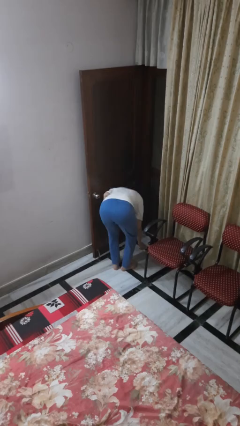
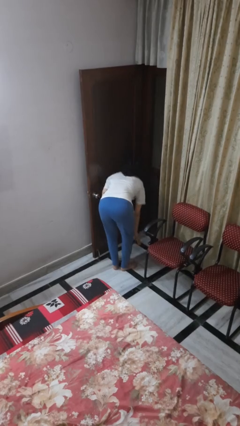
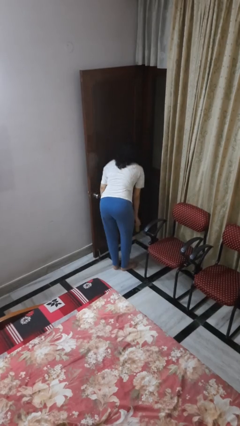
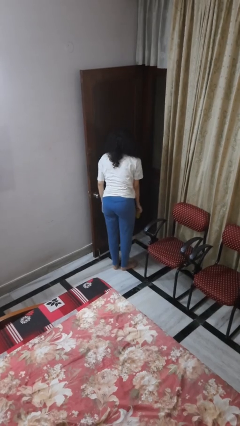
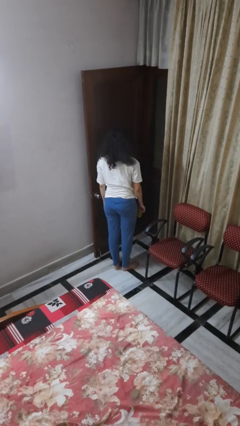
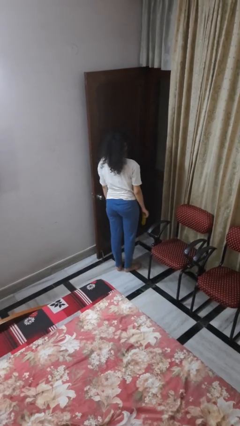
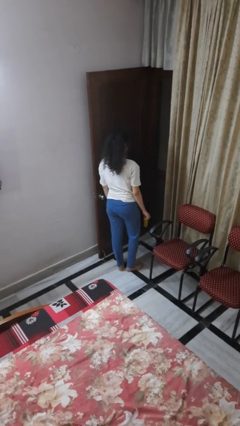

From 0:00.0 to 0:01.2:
person picks up object from floor

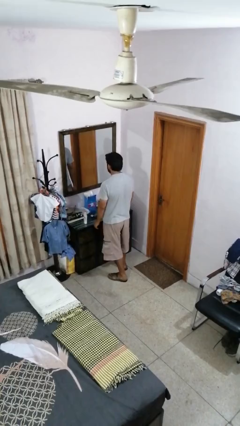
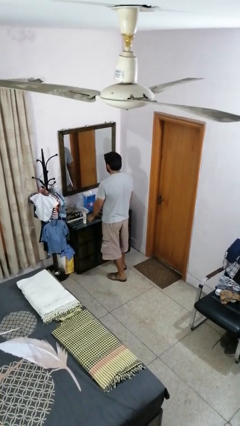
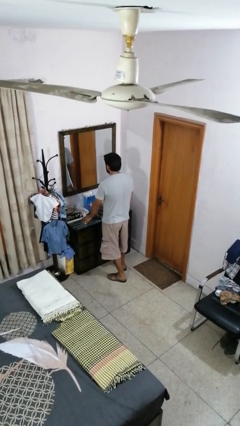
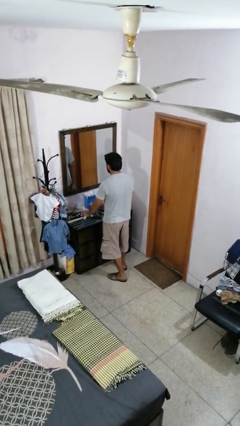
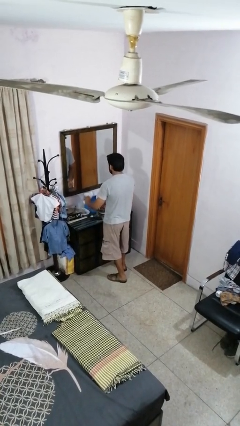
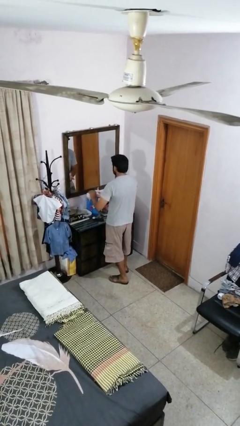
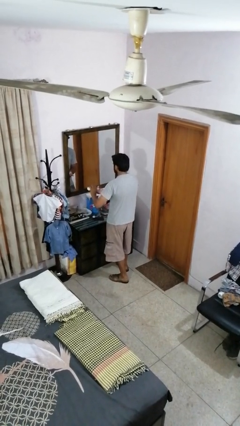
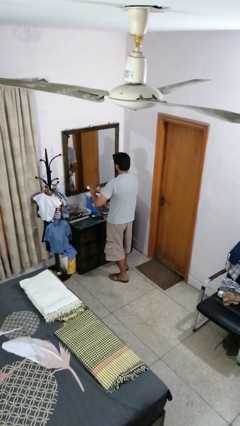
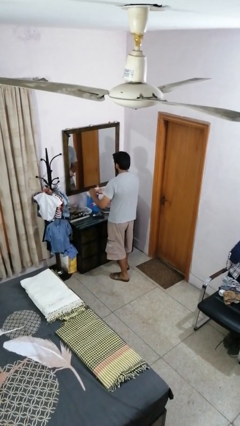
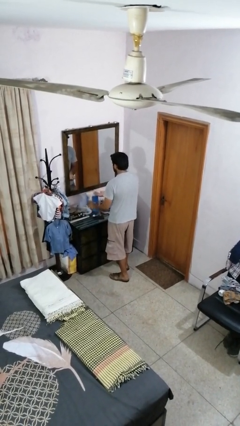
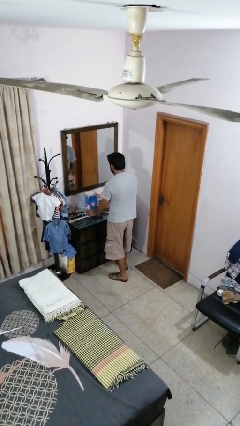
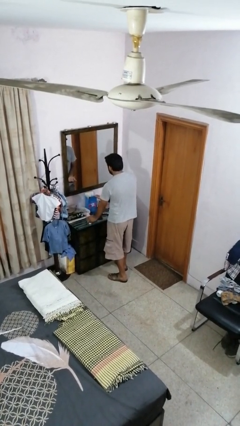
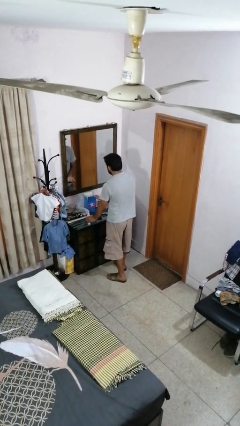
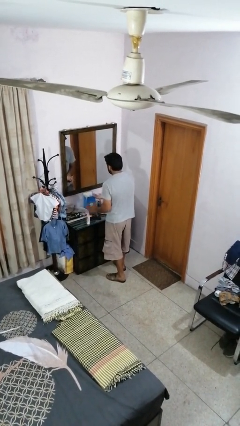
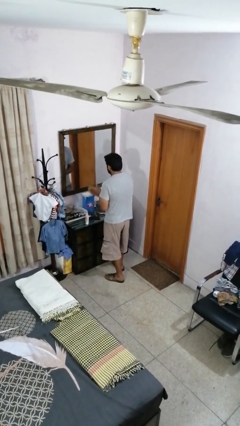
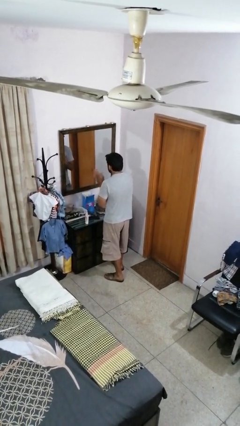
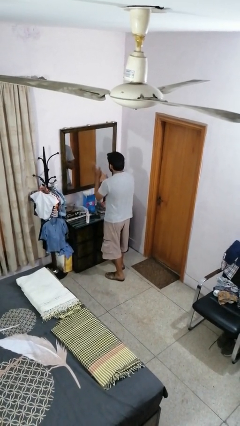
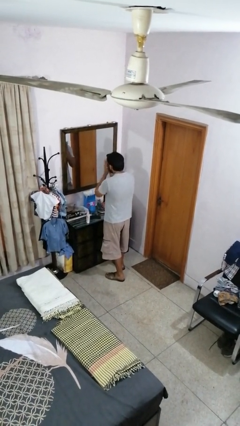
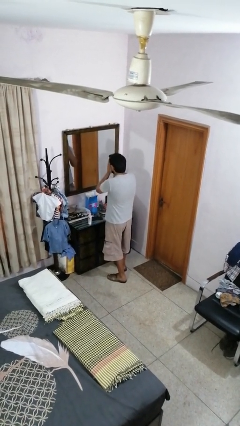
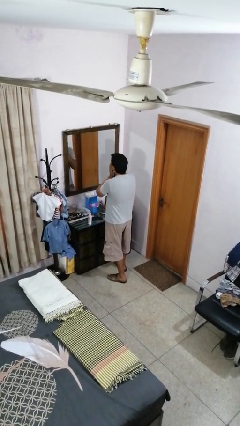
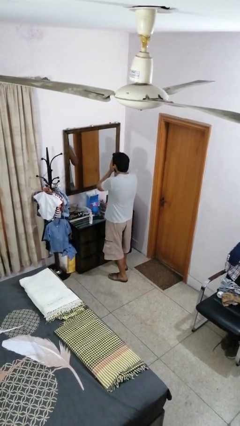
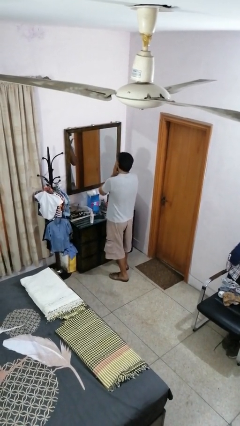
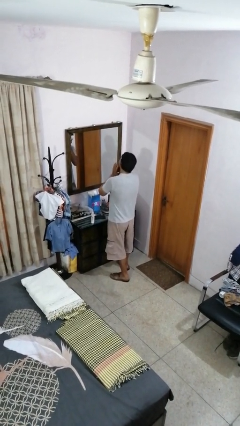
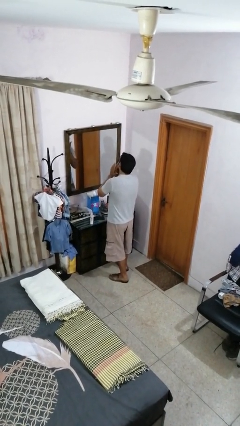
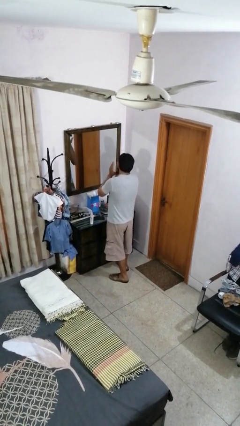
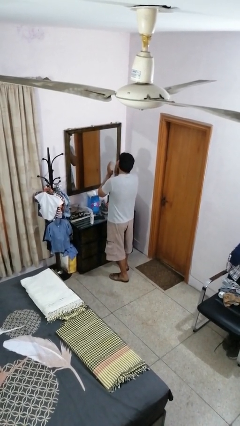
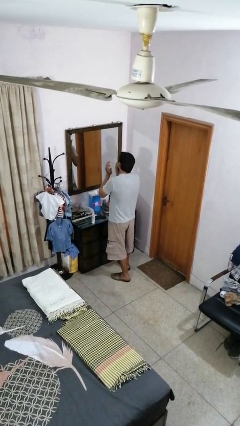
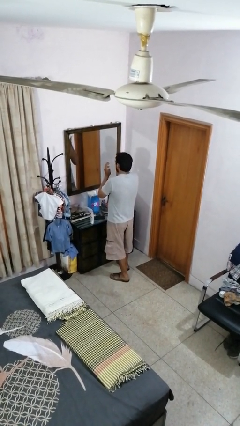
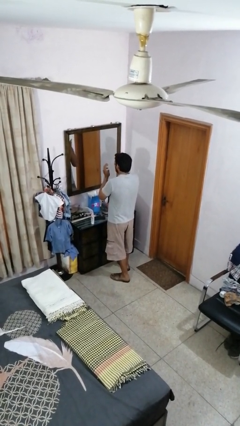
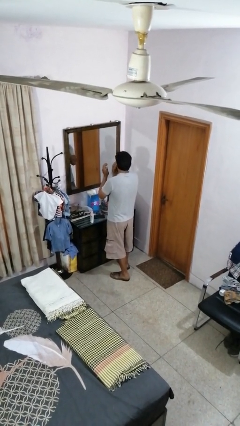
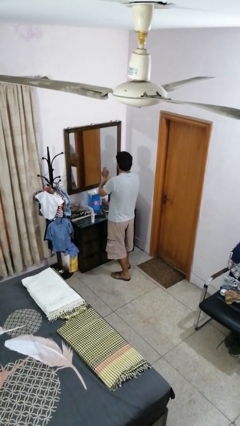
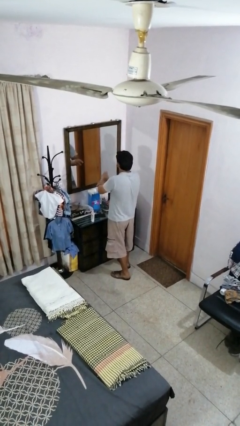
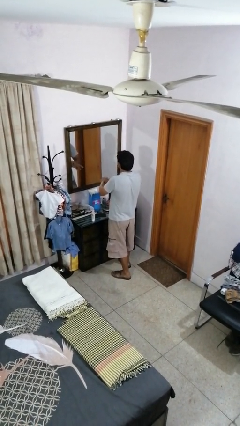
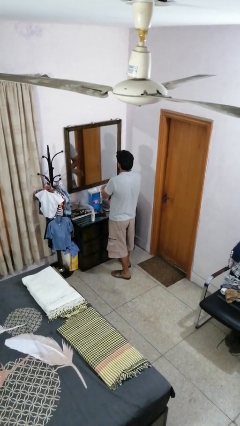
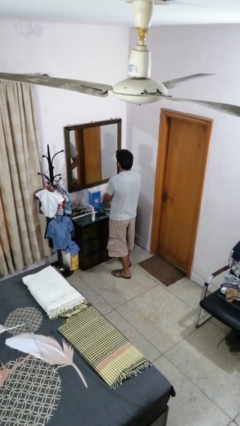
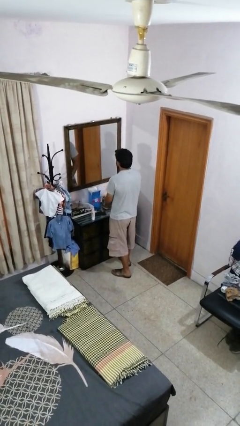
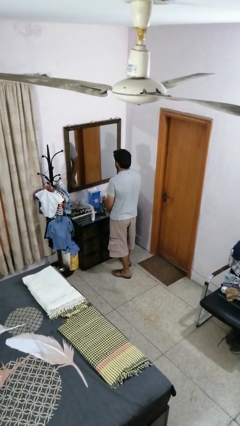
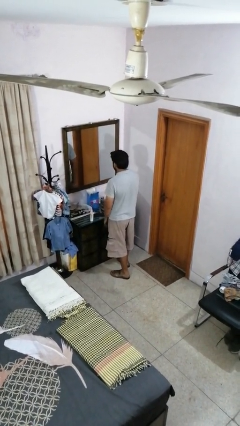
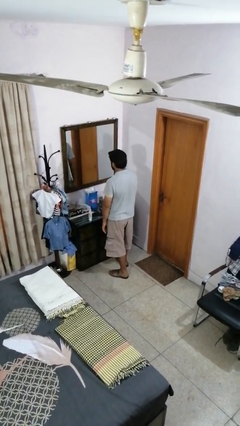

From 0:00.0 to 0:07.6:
person applies sunscreen

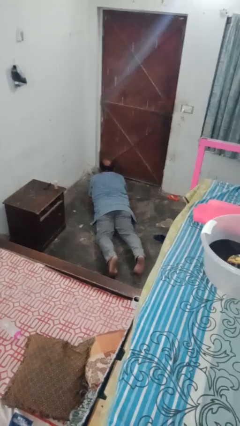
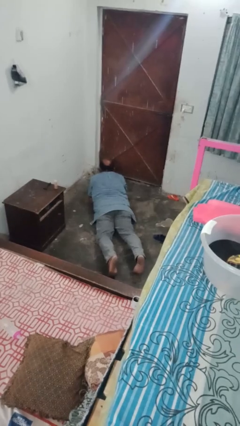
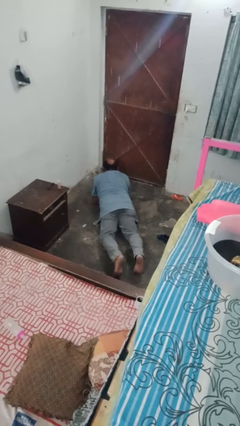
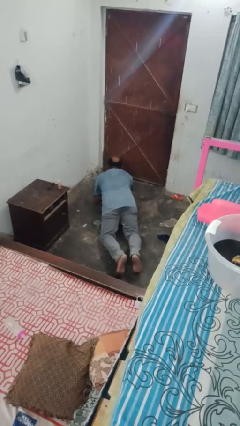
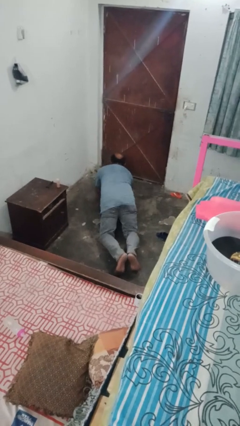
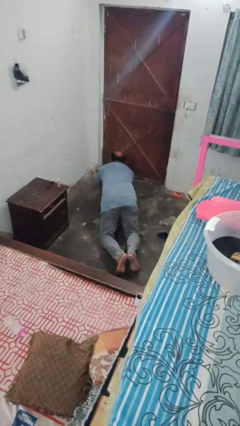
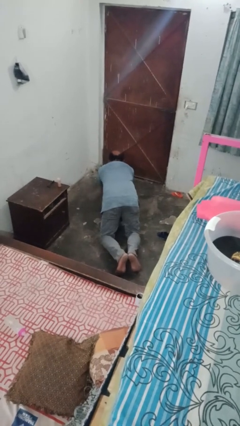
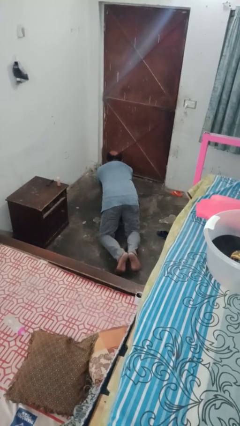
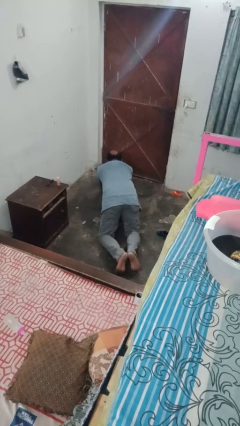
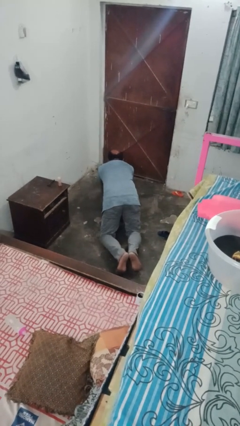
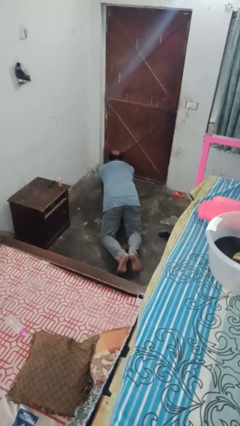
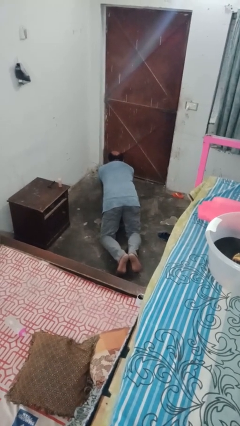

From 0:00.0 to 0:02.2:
person exercises with plank

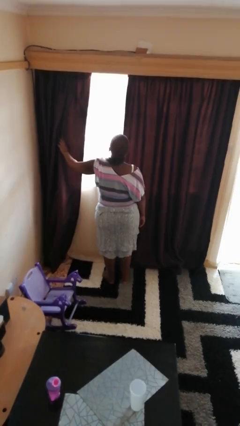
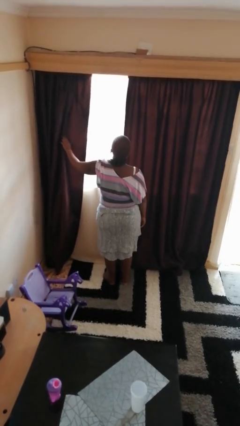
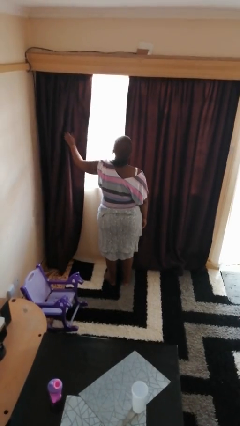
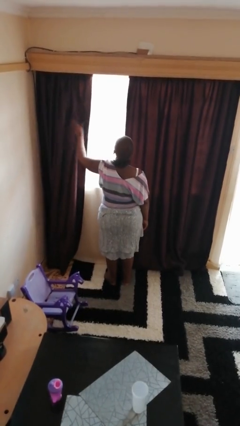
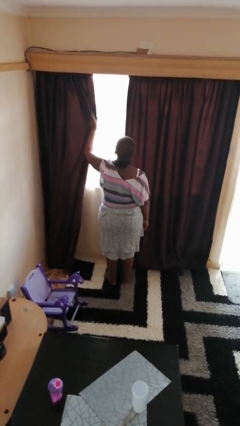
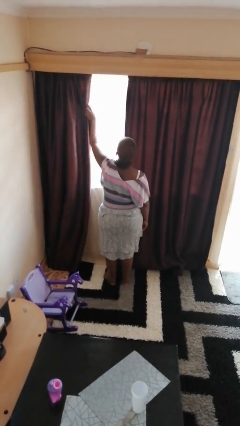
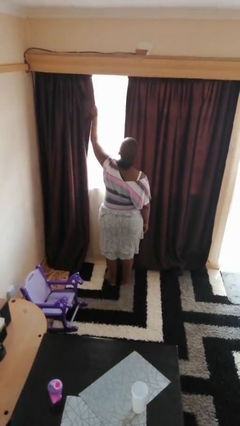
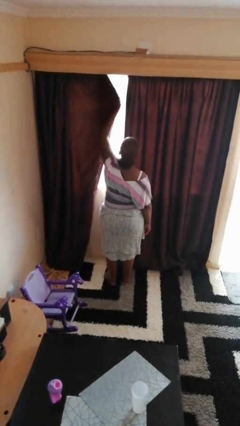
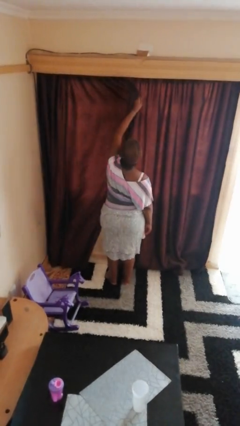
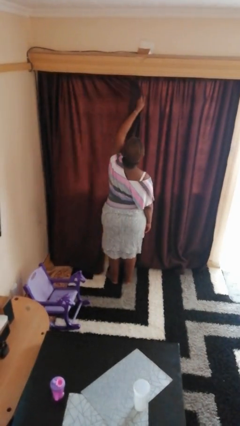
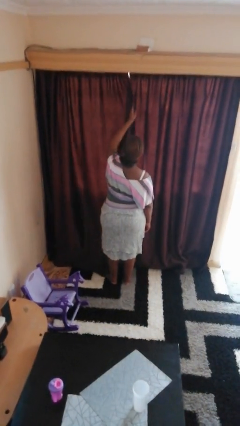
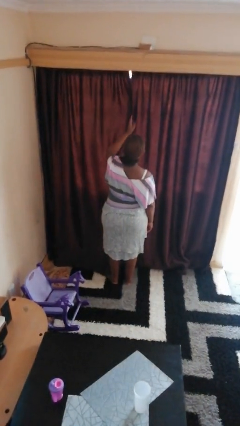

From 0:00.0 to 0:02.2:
person closes curtains

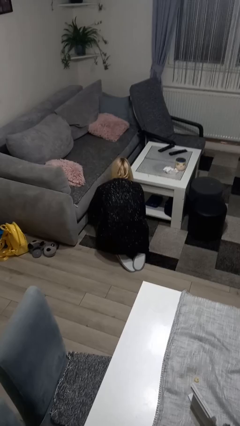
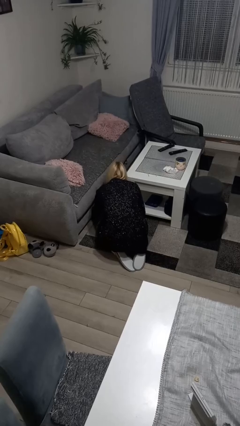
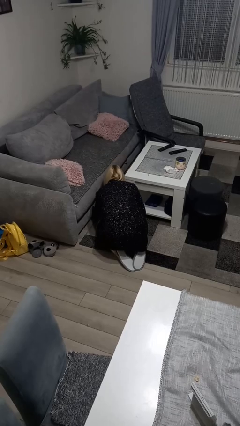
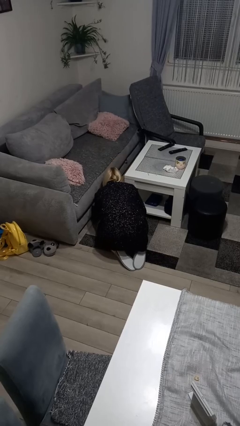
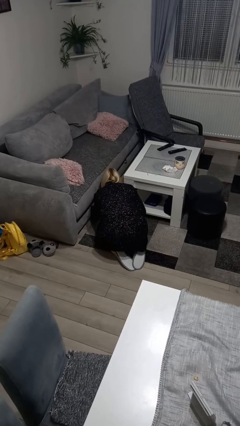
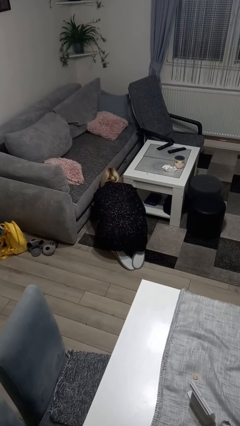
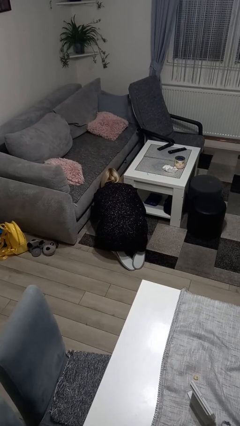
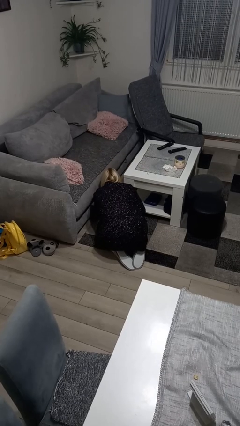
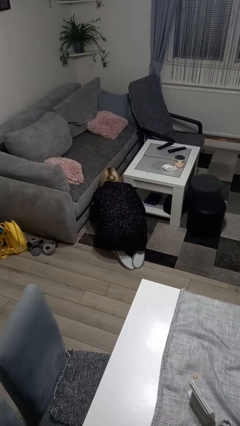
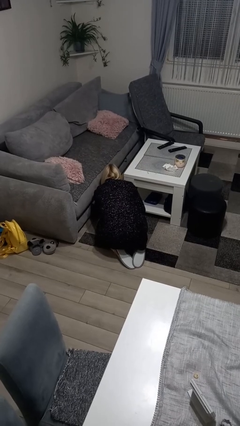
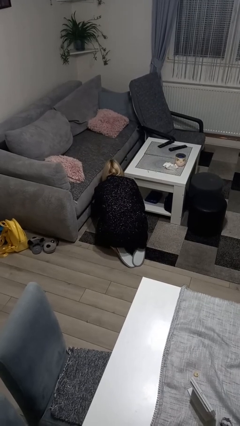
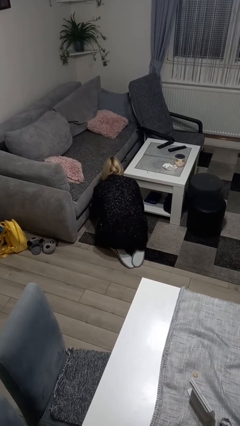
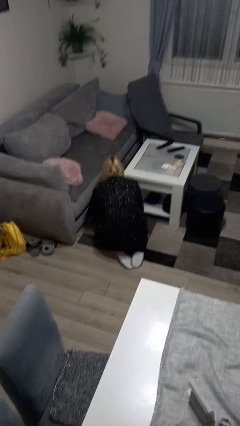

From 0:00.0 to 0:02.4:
person searches under couch

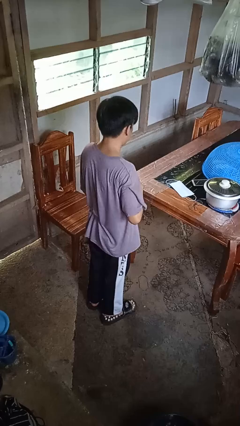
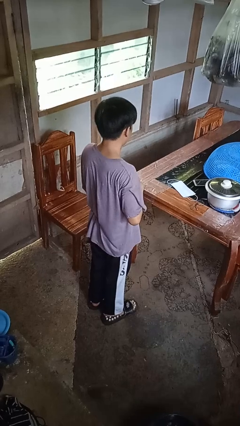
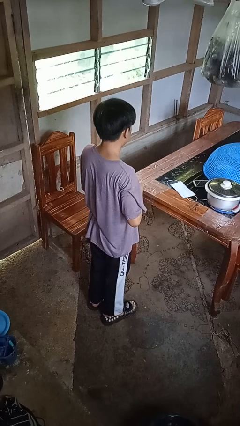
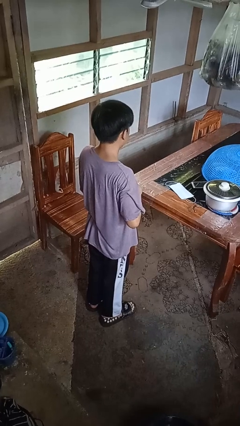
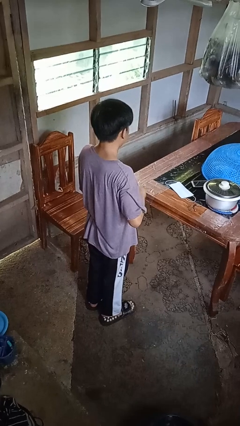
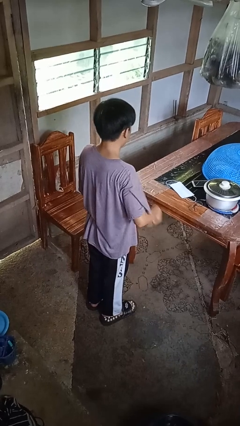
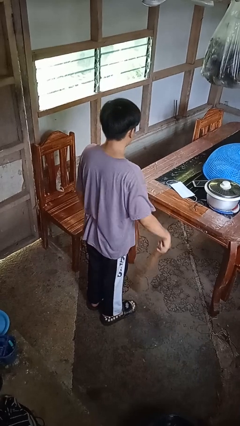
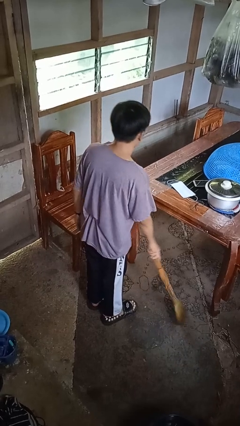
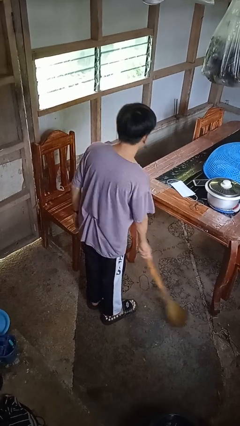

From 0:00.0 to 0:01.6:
person sweeps floor

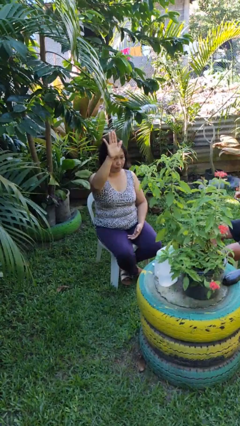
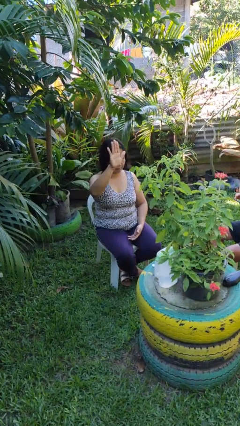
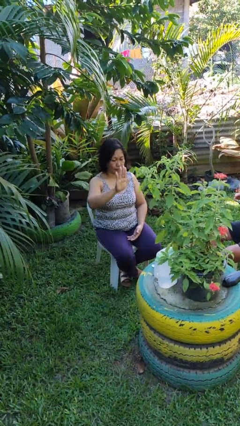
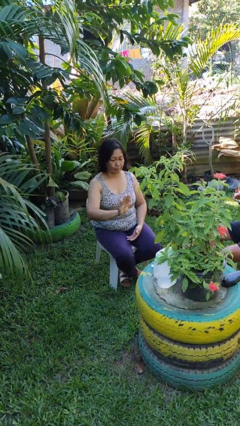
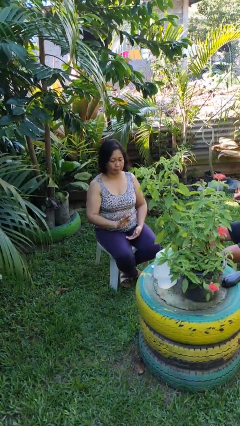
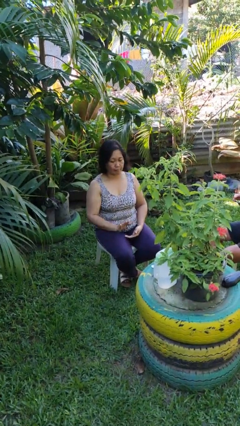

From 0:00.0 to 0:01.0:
person gestures swipe down
